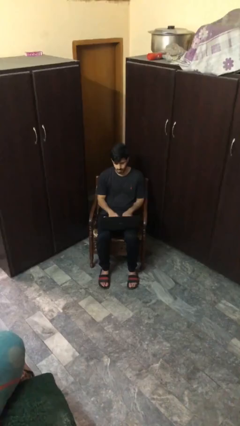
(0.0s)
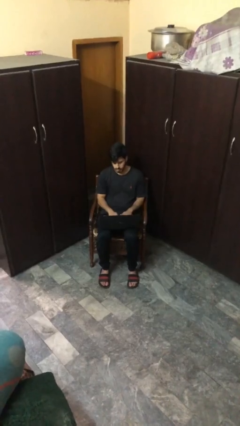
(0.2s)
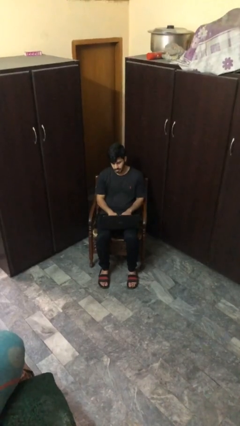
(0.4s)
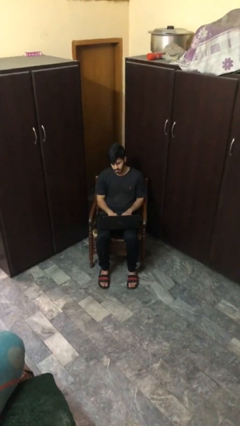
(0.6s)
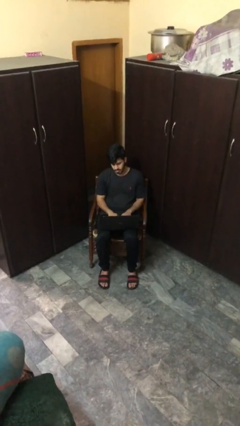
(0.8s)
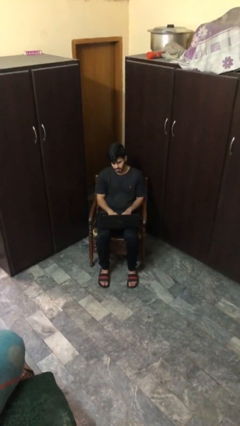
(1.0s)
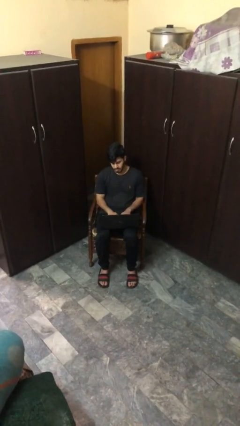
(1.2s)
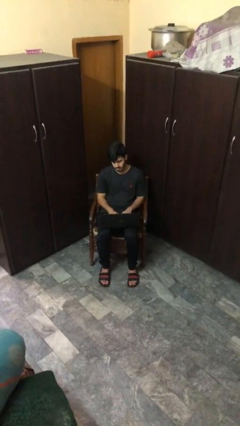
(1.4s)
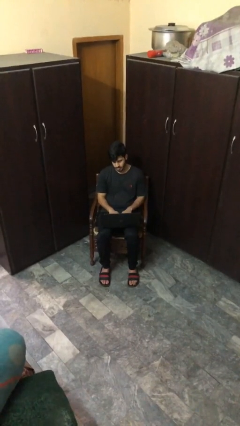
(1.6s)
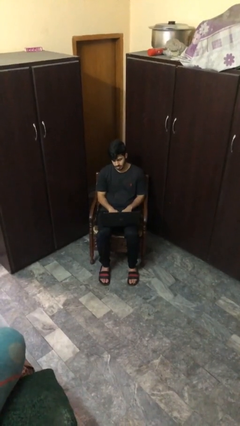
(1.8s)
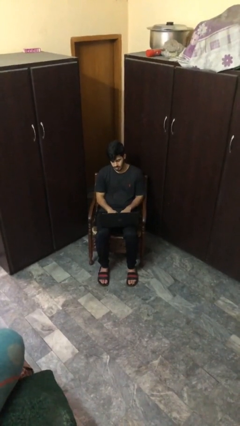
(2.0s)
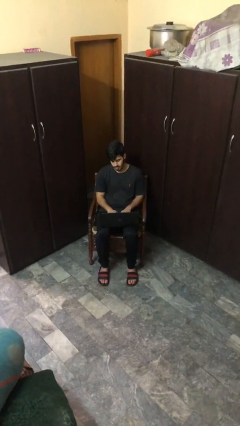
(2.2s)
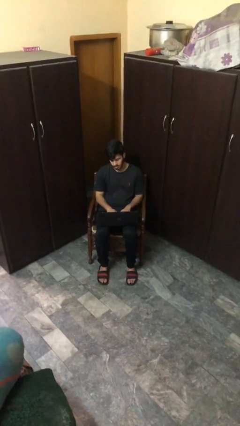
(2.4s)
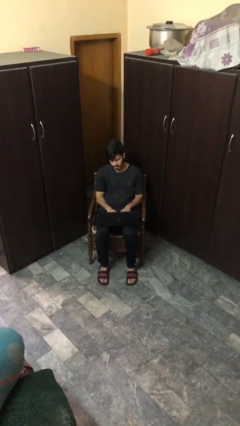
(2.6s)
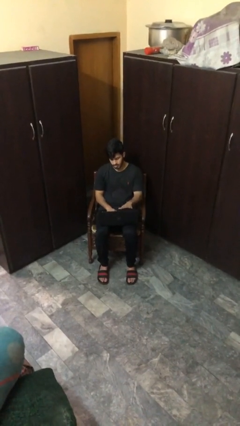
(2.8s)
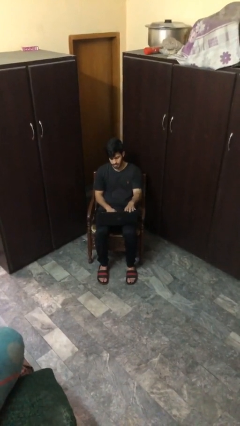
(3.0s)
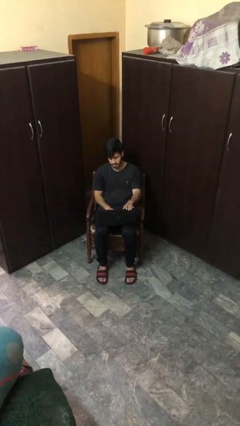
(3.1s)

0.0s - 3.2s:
person interacts with laptop

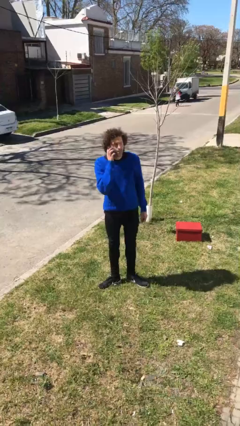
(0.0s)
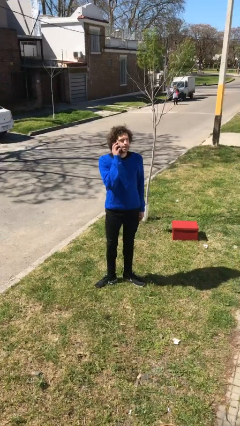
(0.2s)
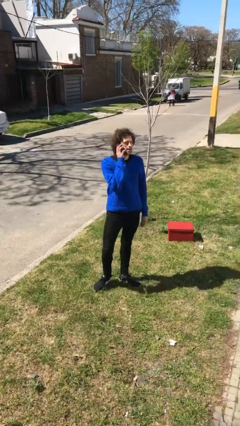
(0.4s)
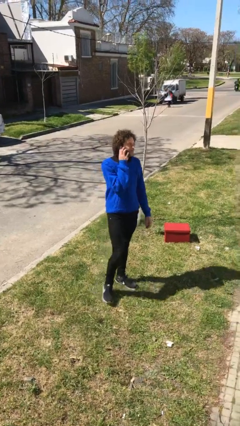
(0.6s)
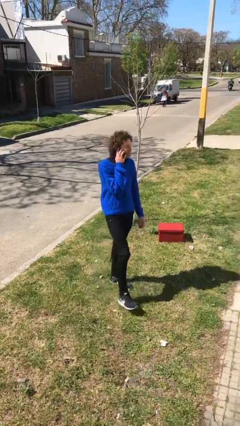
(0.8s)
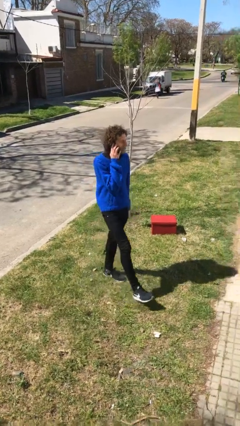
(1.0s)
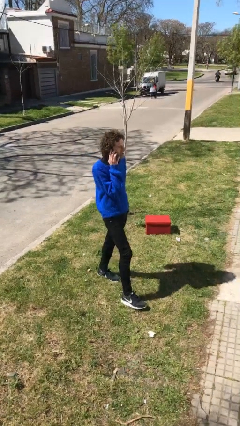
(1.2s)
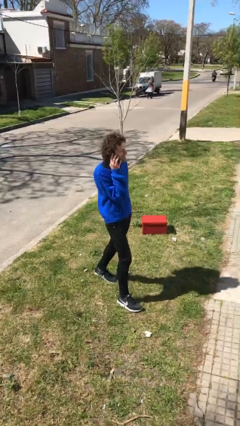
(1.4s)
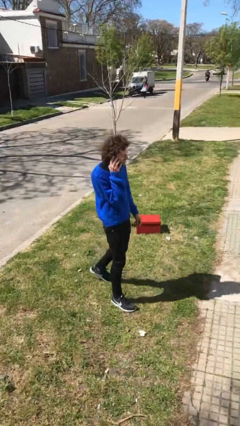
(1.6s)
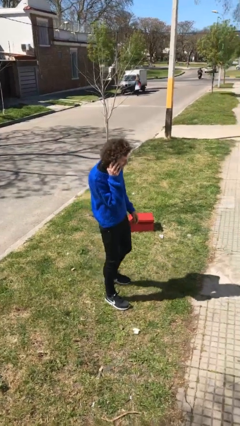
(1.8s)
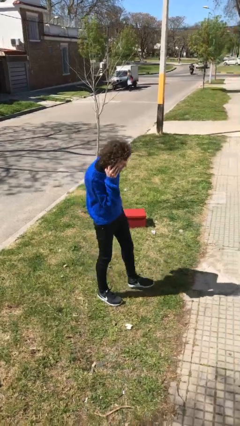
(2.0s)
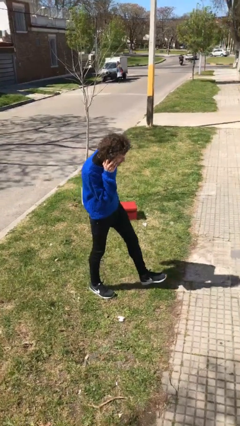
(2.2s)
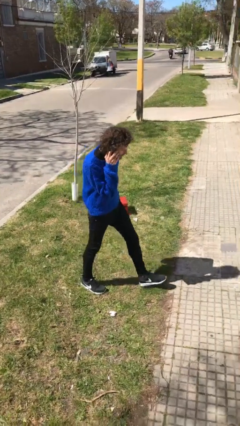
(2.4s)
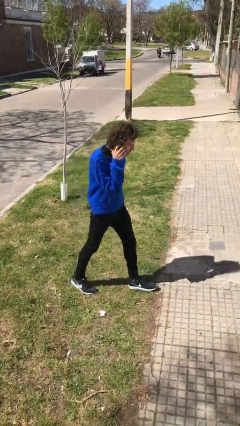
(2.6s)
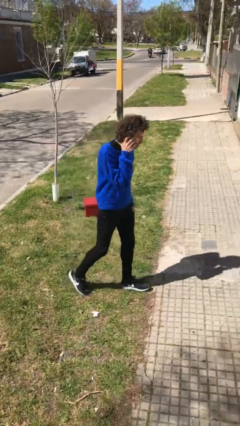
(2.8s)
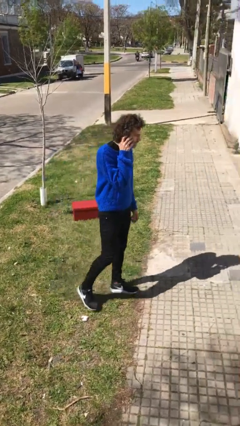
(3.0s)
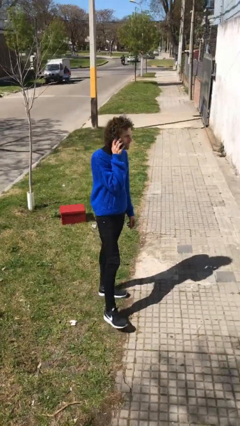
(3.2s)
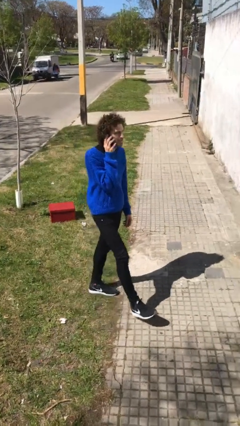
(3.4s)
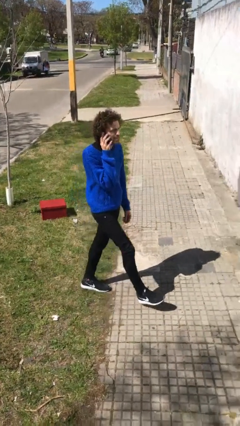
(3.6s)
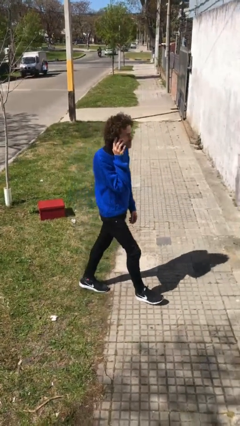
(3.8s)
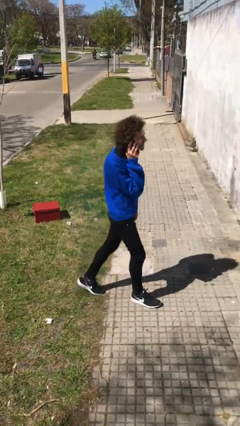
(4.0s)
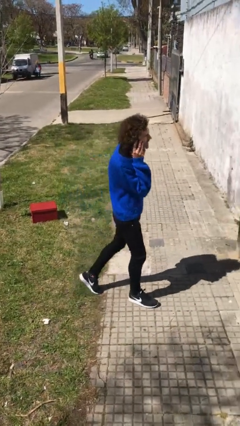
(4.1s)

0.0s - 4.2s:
person talks on phone

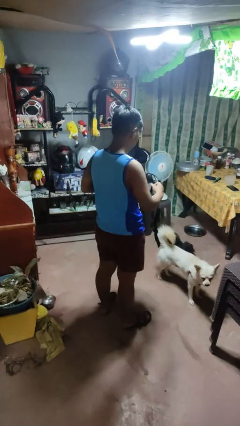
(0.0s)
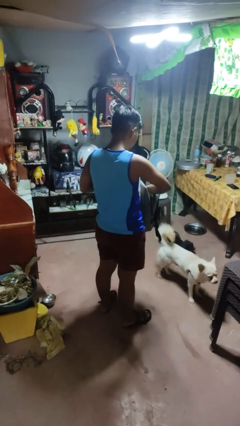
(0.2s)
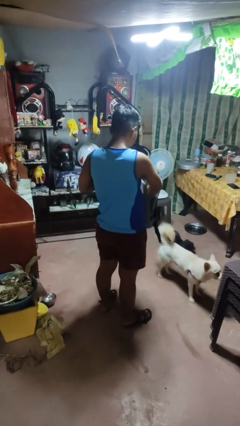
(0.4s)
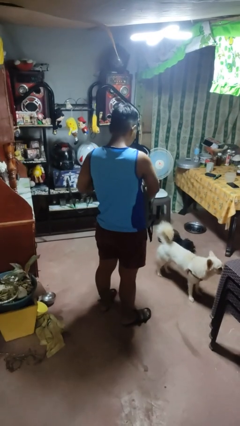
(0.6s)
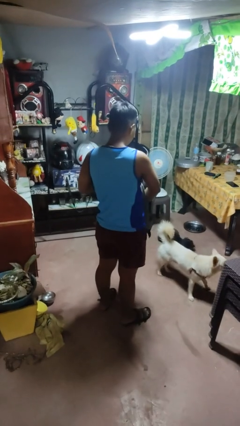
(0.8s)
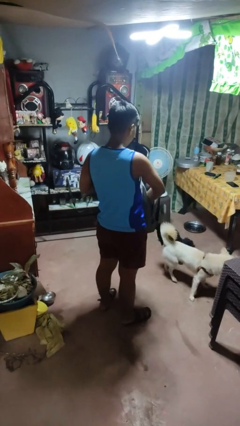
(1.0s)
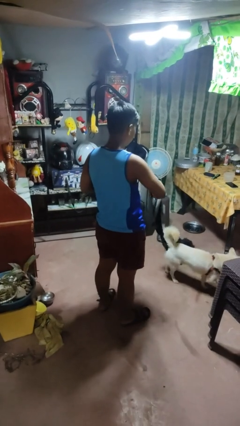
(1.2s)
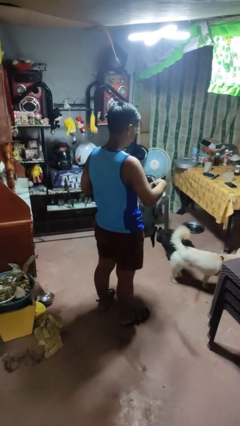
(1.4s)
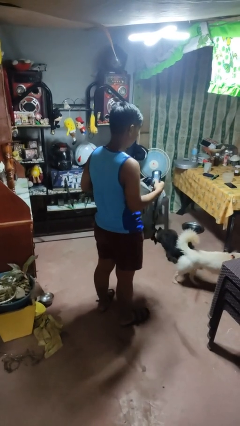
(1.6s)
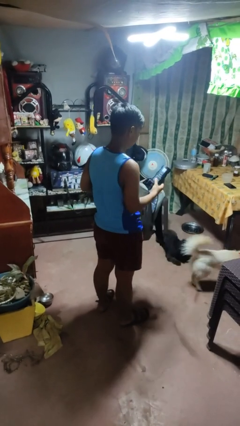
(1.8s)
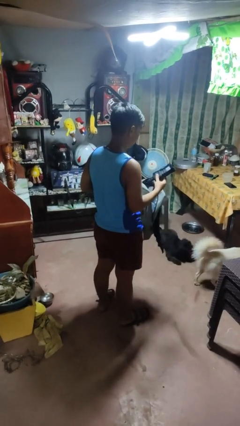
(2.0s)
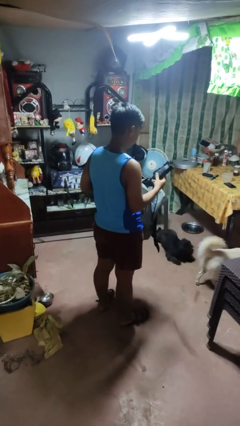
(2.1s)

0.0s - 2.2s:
person takes object from bag

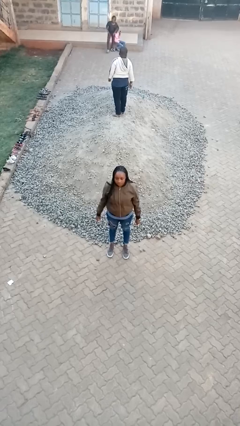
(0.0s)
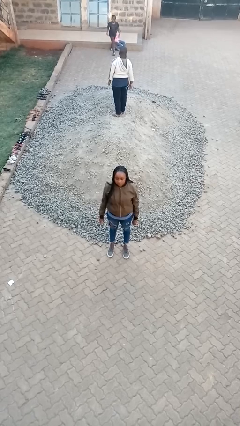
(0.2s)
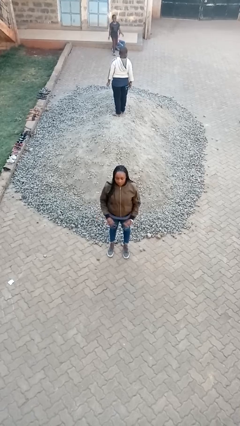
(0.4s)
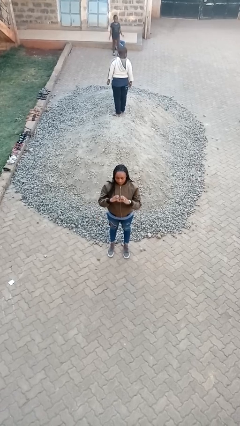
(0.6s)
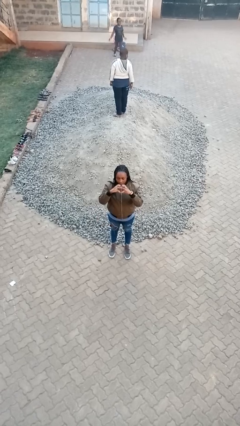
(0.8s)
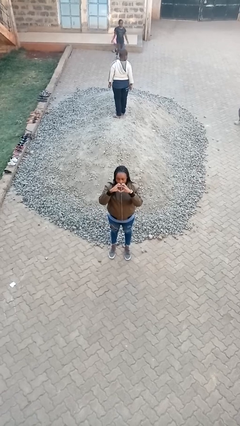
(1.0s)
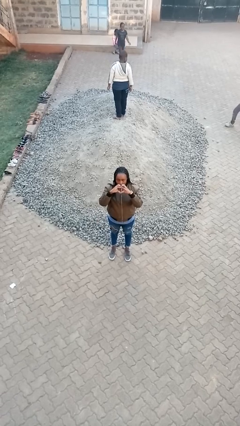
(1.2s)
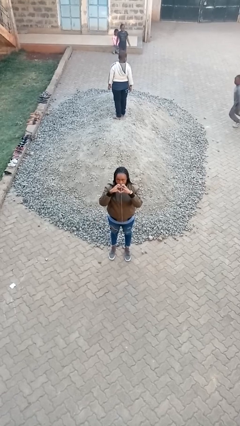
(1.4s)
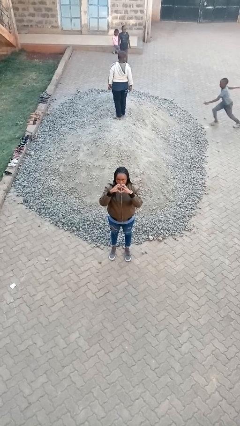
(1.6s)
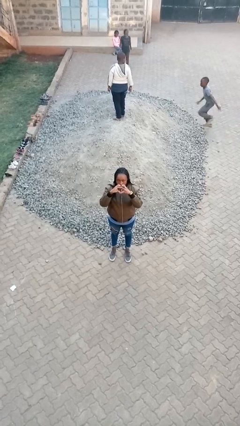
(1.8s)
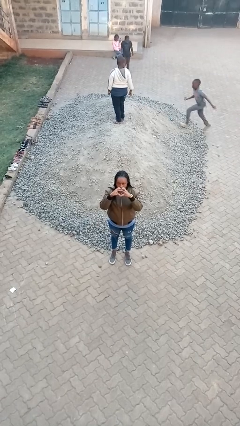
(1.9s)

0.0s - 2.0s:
person gestures heart

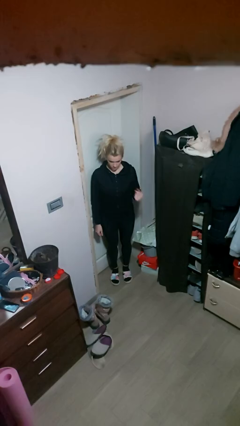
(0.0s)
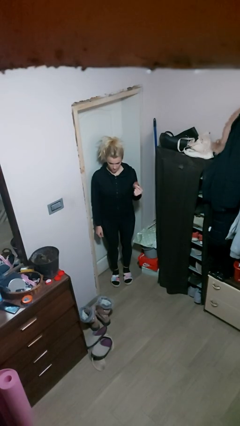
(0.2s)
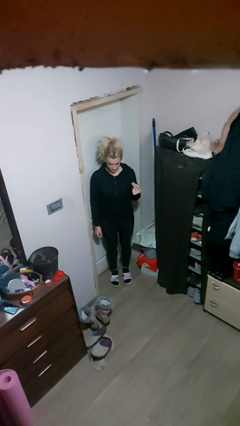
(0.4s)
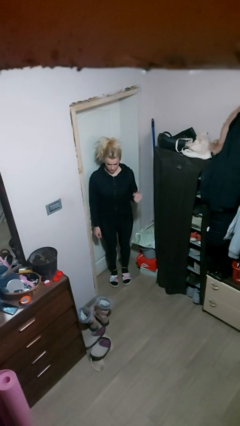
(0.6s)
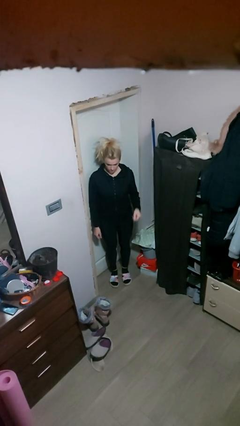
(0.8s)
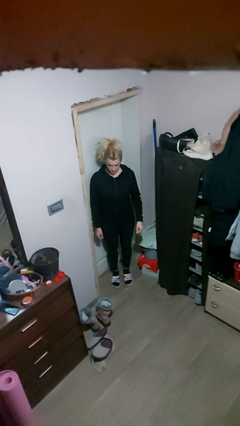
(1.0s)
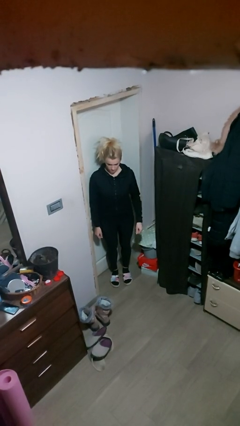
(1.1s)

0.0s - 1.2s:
person snaps fingers

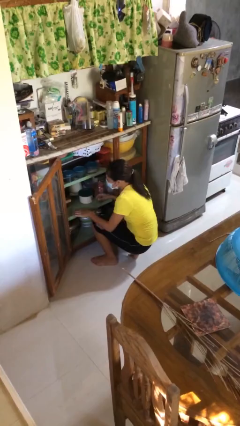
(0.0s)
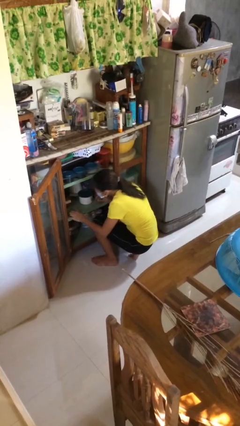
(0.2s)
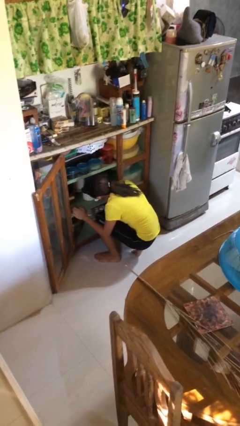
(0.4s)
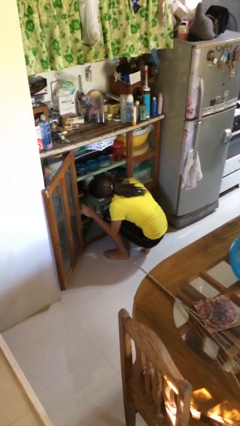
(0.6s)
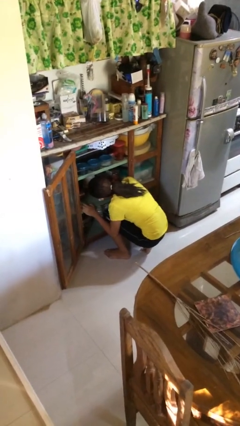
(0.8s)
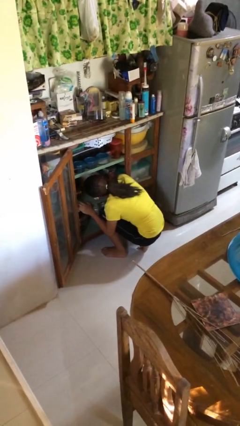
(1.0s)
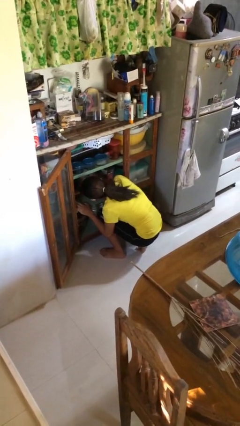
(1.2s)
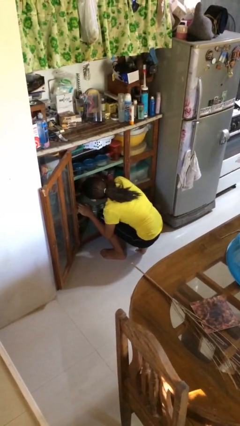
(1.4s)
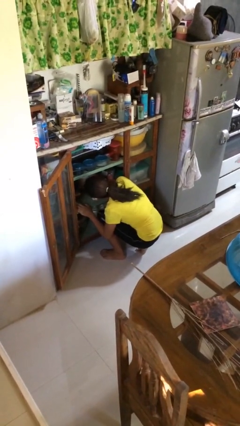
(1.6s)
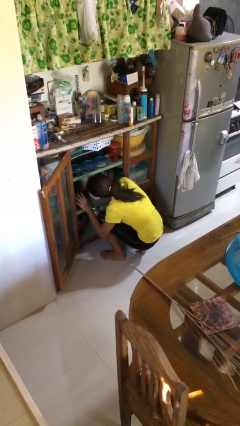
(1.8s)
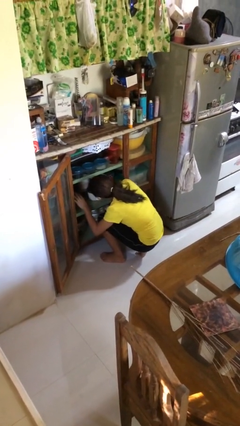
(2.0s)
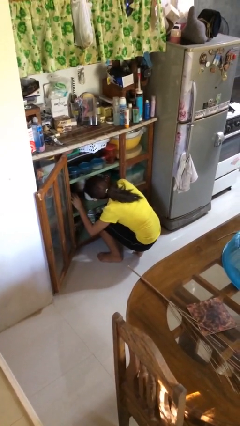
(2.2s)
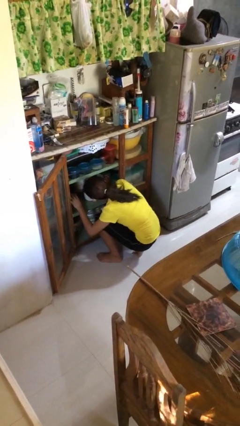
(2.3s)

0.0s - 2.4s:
person searches in cabinet

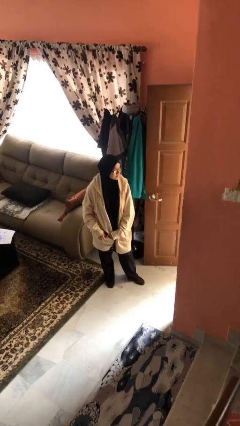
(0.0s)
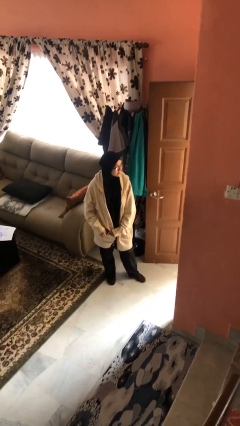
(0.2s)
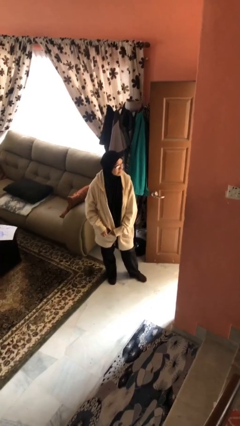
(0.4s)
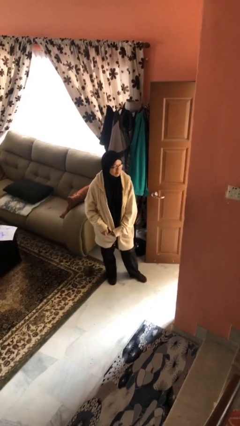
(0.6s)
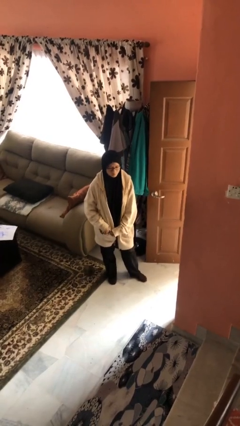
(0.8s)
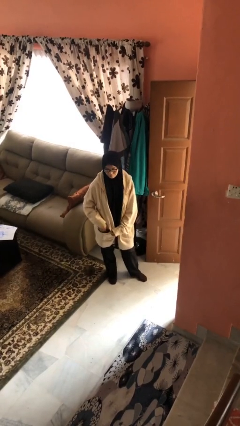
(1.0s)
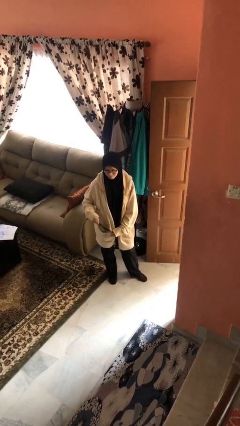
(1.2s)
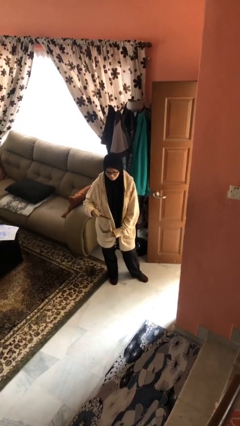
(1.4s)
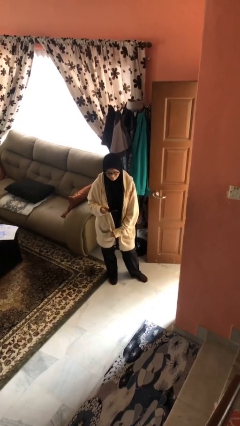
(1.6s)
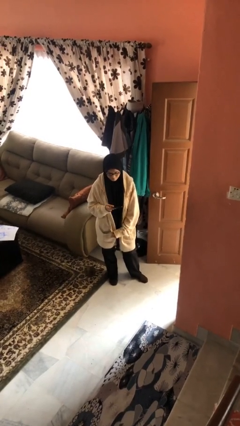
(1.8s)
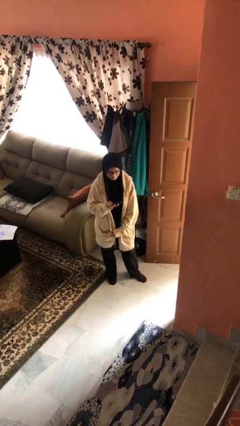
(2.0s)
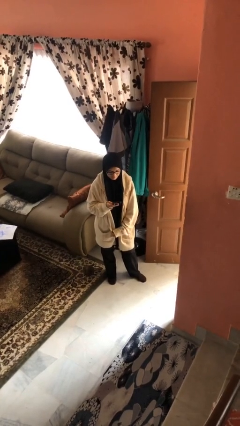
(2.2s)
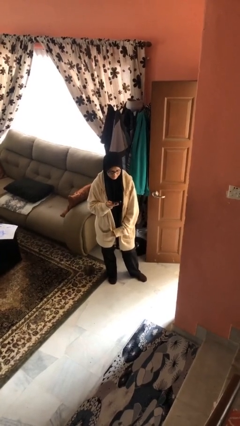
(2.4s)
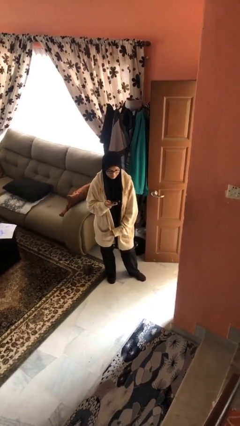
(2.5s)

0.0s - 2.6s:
person takes phone from pocket
